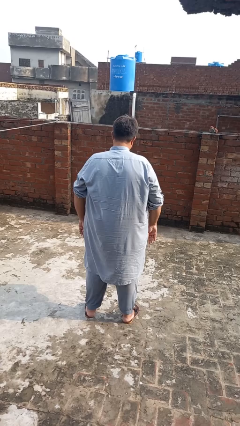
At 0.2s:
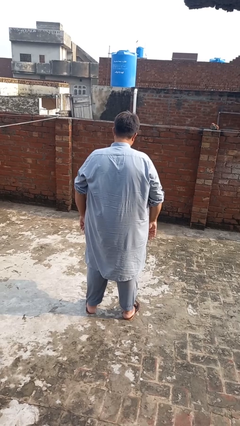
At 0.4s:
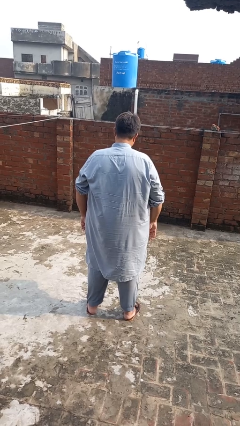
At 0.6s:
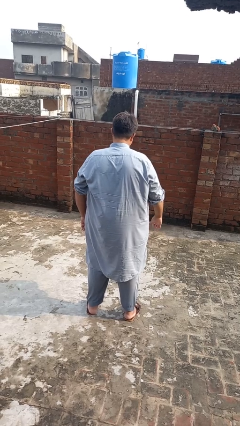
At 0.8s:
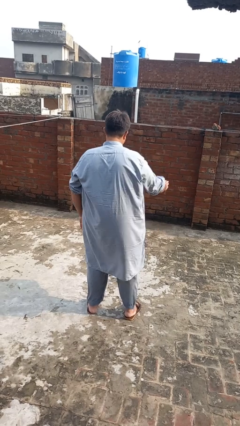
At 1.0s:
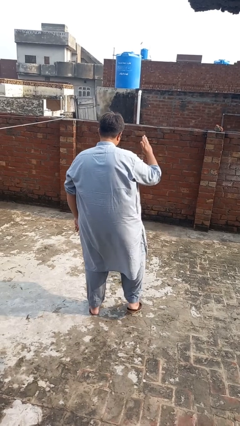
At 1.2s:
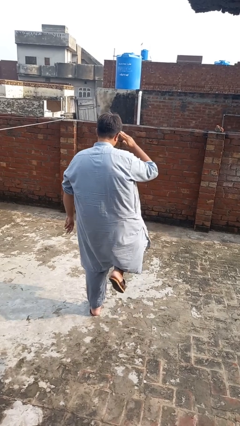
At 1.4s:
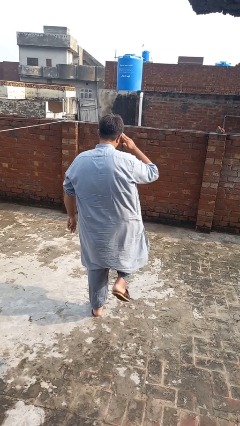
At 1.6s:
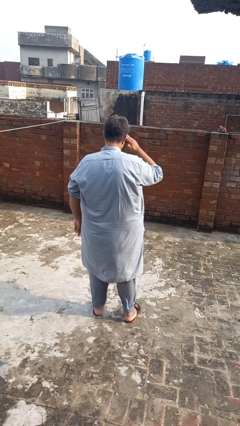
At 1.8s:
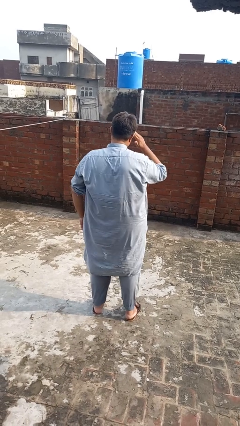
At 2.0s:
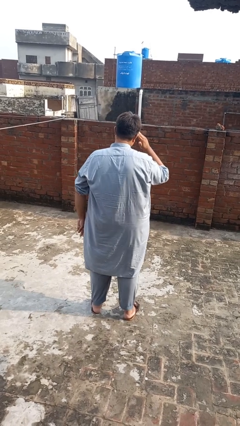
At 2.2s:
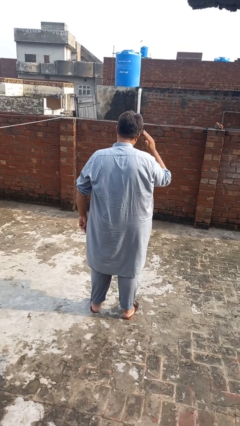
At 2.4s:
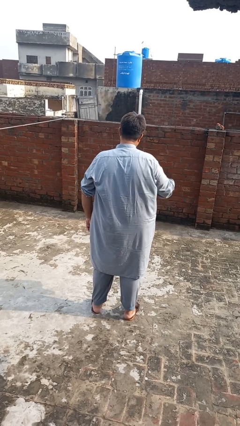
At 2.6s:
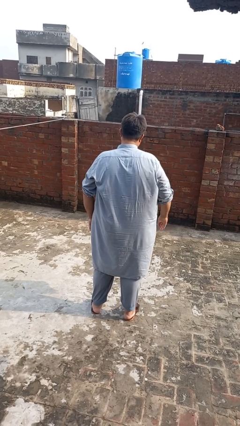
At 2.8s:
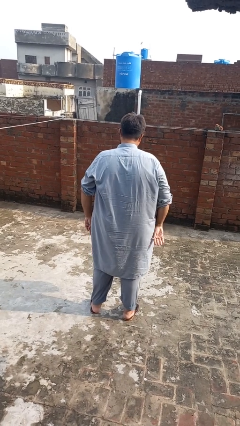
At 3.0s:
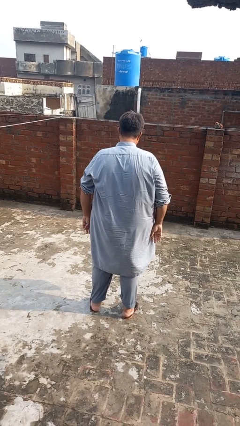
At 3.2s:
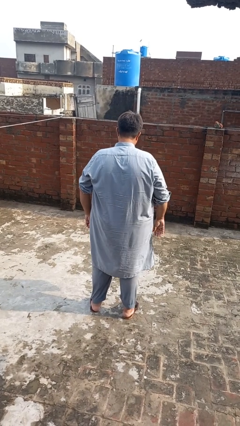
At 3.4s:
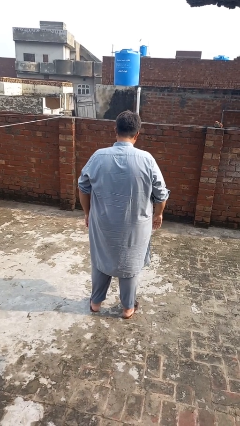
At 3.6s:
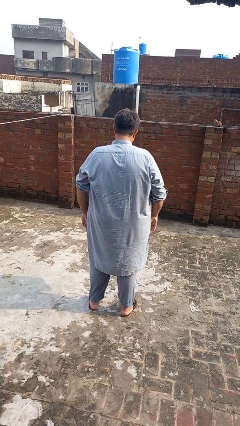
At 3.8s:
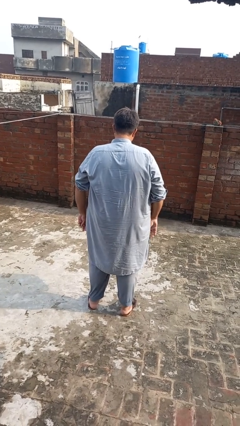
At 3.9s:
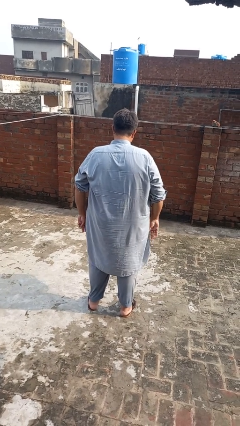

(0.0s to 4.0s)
person salutes

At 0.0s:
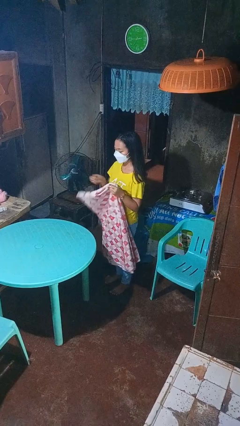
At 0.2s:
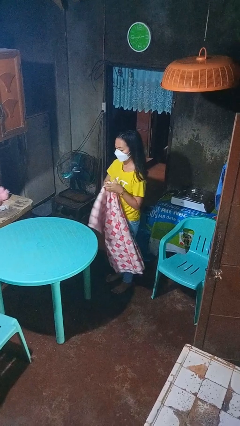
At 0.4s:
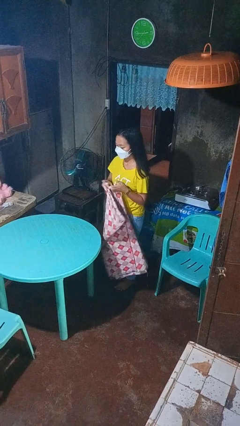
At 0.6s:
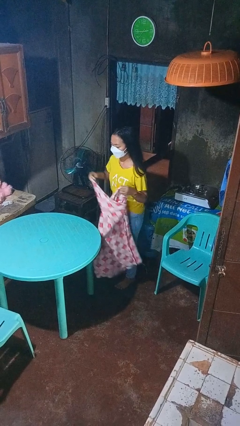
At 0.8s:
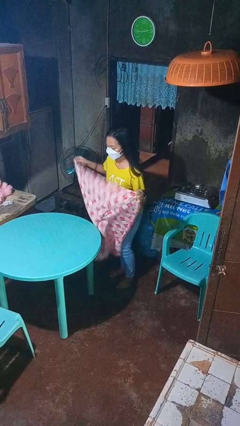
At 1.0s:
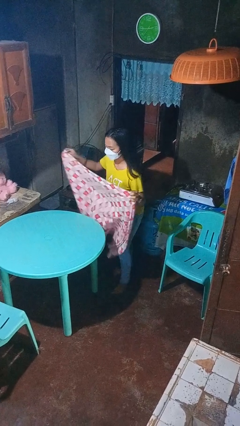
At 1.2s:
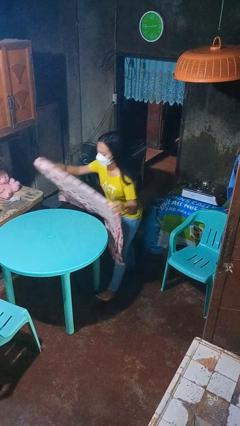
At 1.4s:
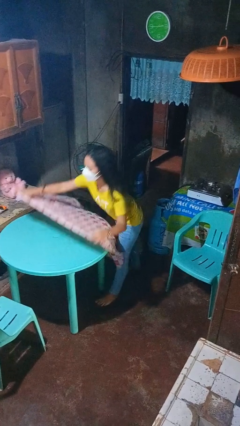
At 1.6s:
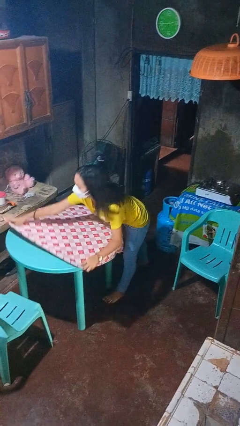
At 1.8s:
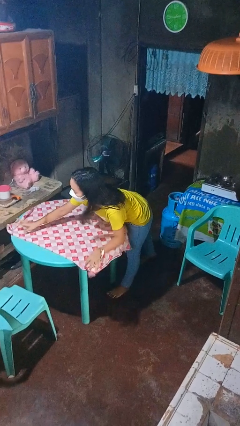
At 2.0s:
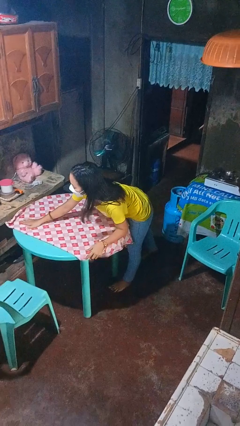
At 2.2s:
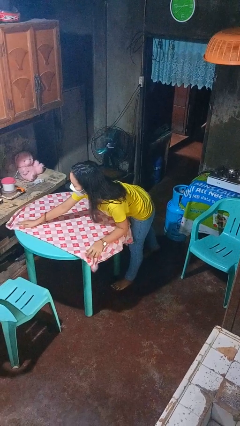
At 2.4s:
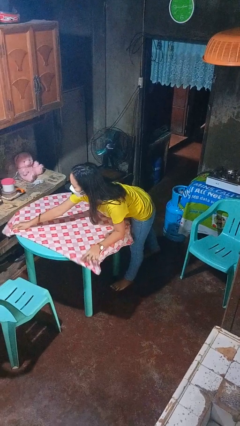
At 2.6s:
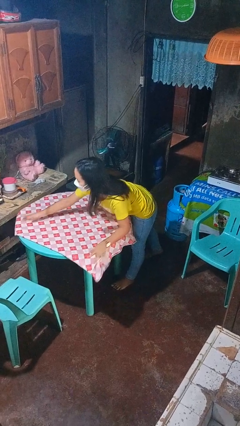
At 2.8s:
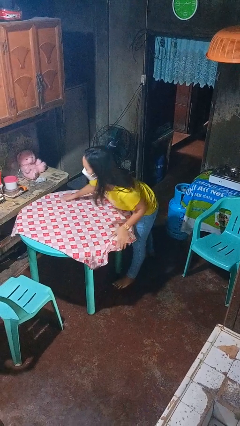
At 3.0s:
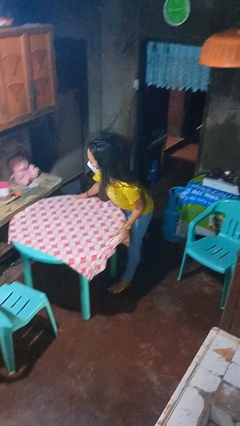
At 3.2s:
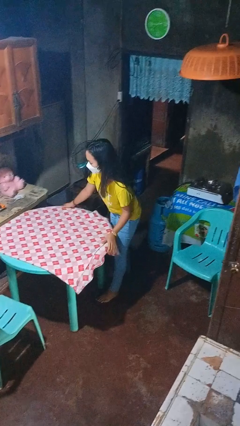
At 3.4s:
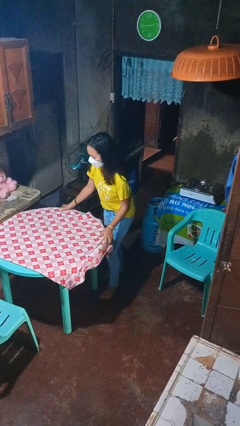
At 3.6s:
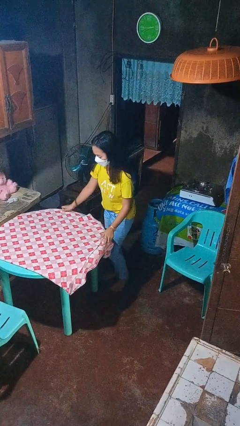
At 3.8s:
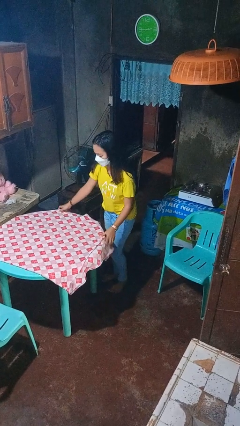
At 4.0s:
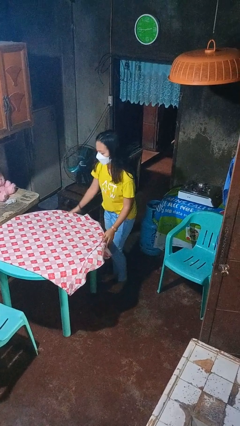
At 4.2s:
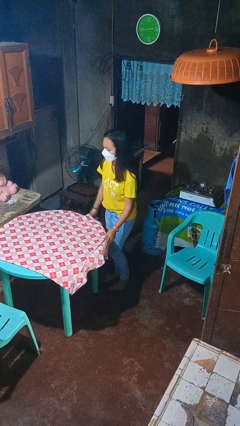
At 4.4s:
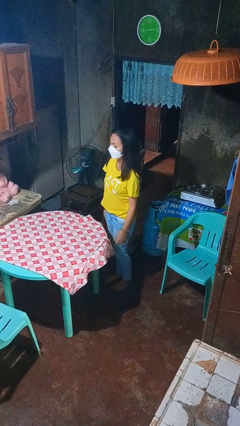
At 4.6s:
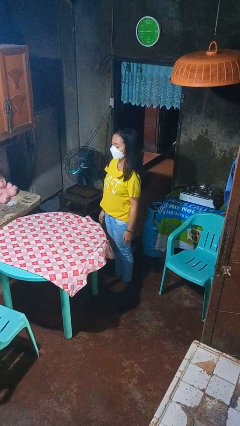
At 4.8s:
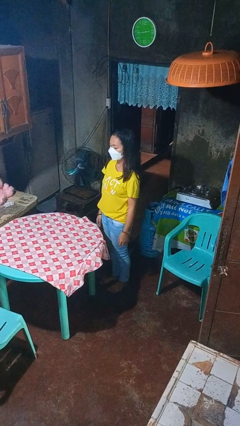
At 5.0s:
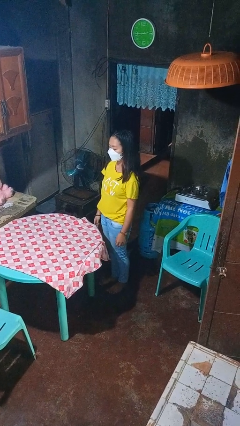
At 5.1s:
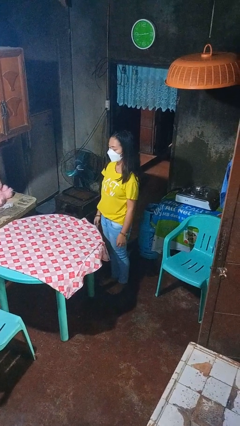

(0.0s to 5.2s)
person spreads tablecloth

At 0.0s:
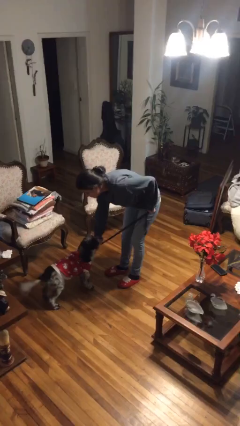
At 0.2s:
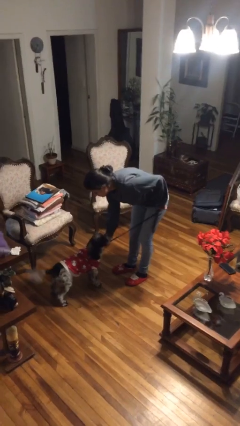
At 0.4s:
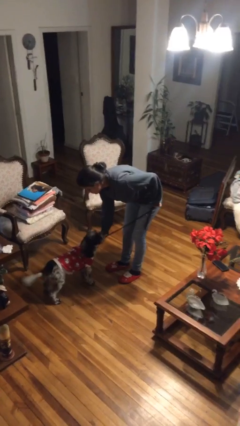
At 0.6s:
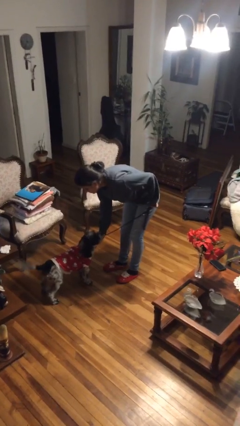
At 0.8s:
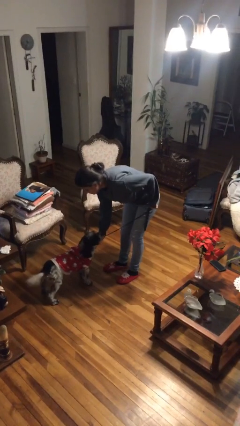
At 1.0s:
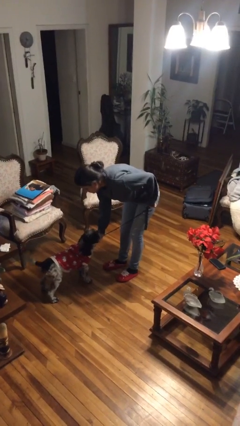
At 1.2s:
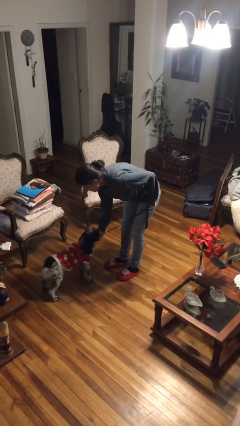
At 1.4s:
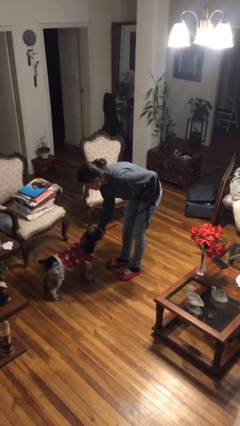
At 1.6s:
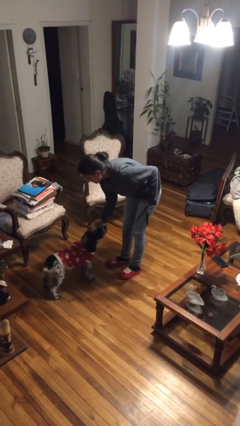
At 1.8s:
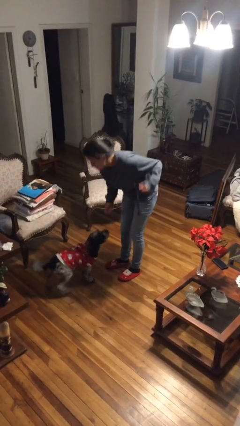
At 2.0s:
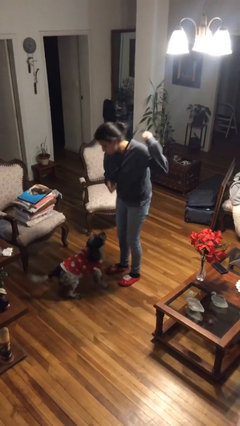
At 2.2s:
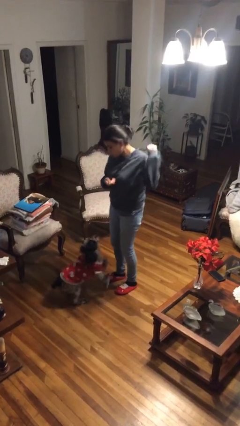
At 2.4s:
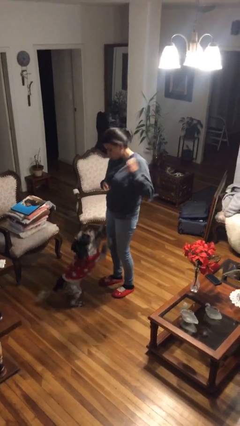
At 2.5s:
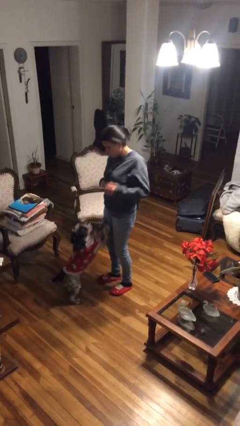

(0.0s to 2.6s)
person unattaches leash from dog

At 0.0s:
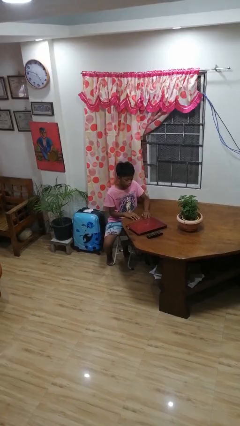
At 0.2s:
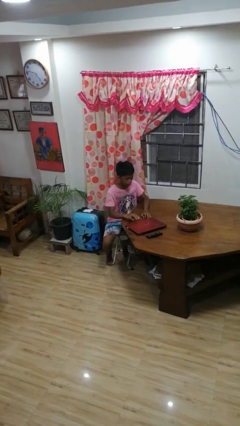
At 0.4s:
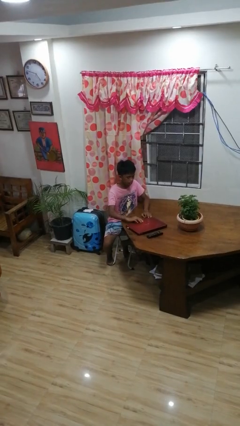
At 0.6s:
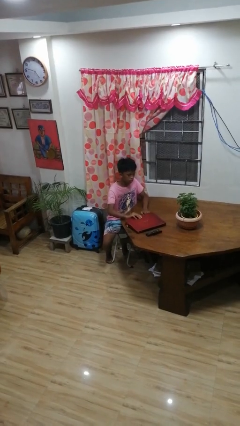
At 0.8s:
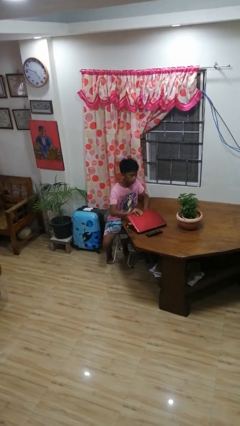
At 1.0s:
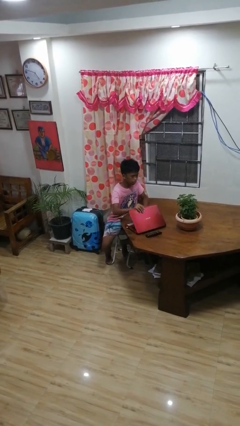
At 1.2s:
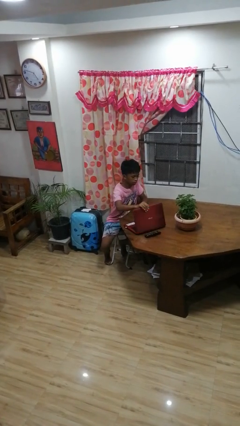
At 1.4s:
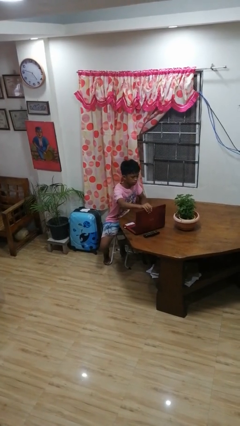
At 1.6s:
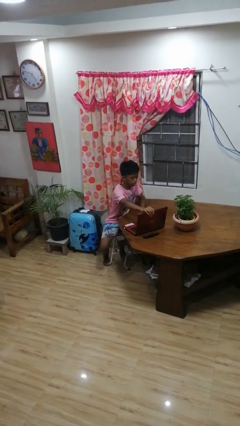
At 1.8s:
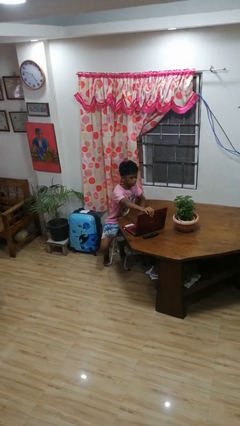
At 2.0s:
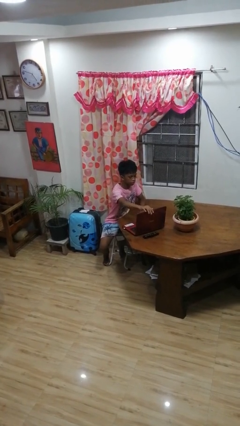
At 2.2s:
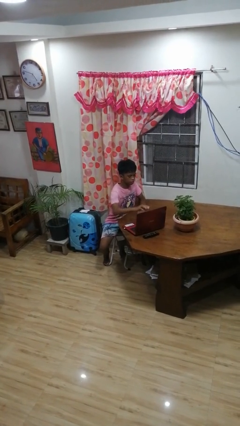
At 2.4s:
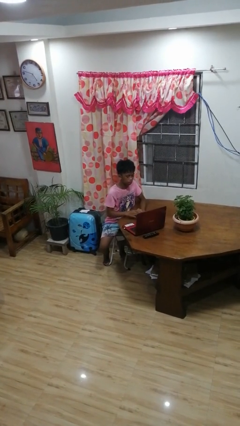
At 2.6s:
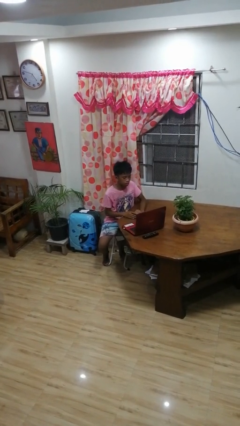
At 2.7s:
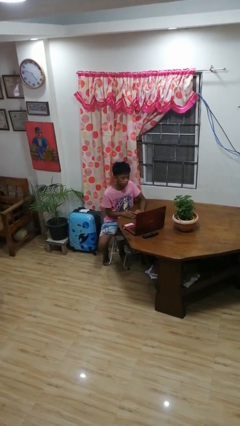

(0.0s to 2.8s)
person opens laptop

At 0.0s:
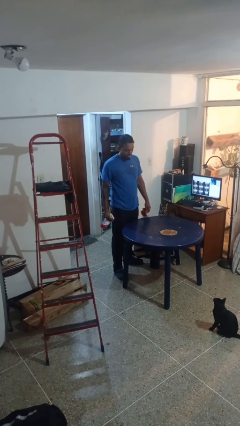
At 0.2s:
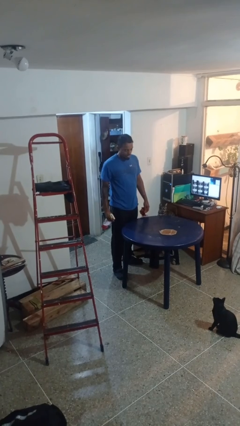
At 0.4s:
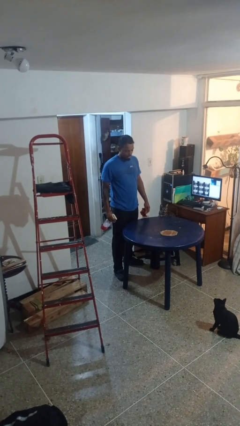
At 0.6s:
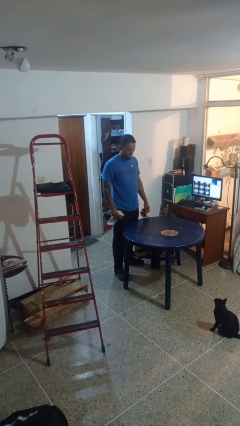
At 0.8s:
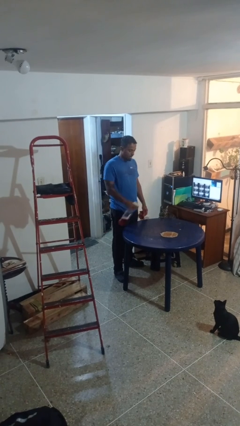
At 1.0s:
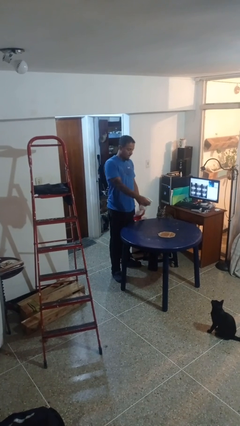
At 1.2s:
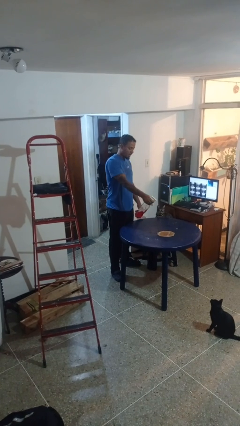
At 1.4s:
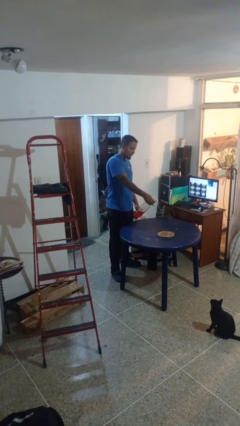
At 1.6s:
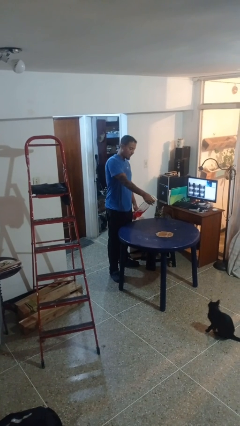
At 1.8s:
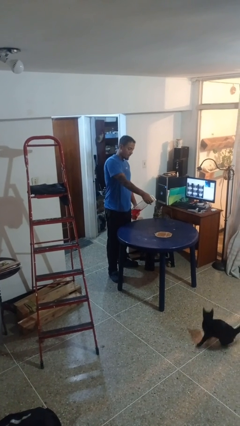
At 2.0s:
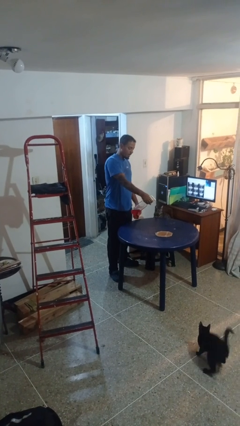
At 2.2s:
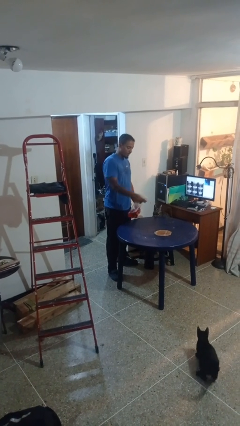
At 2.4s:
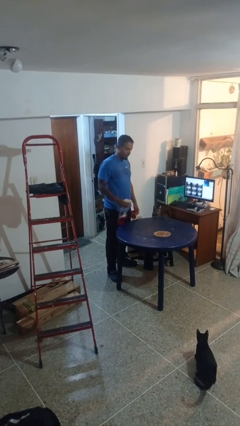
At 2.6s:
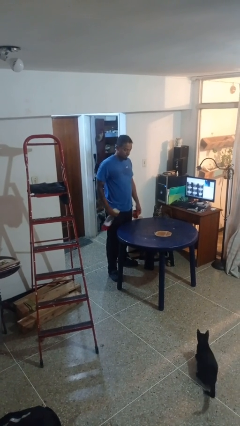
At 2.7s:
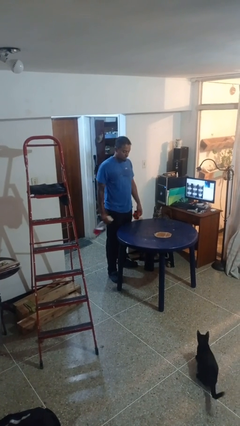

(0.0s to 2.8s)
person sprays from bottle

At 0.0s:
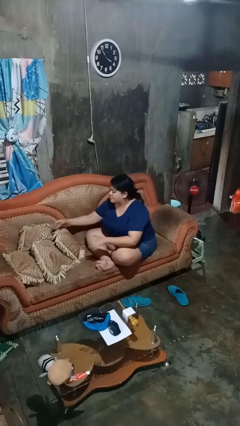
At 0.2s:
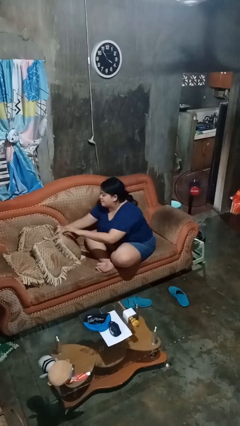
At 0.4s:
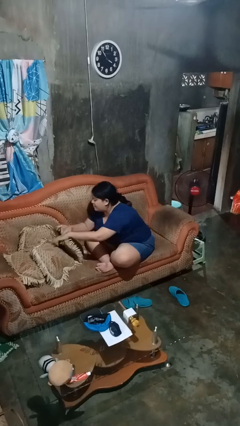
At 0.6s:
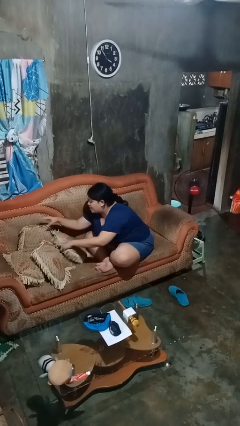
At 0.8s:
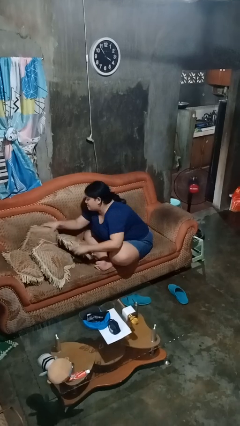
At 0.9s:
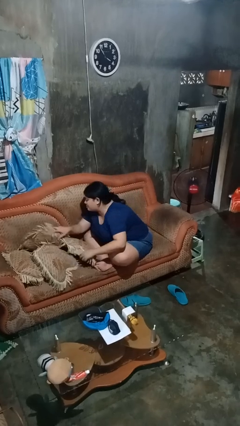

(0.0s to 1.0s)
person searches in couch
